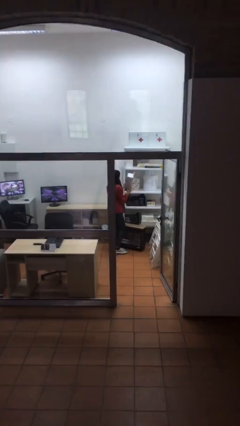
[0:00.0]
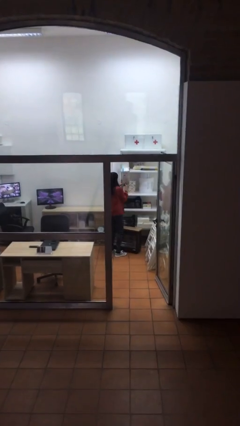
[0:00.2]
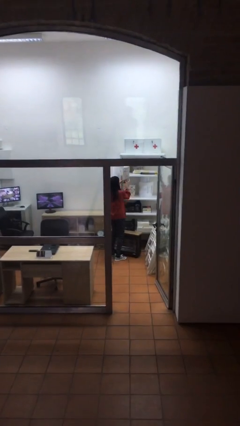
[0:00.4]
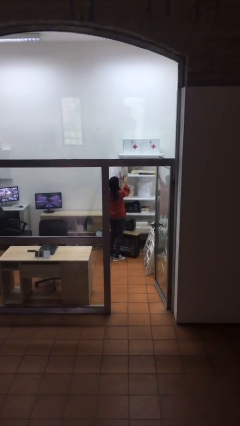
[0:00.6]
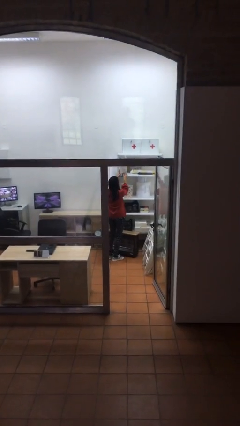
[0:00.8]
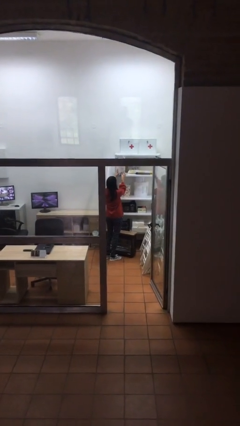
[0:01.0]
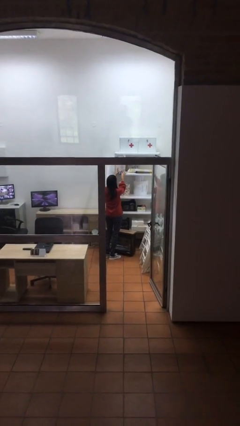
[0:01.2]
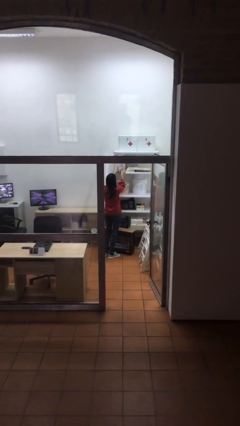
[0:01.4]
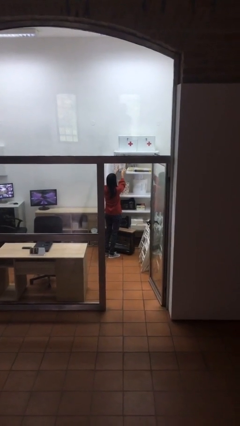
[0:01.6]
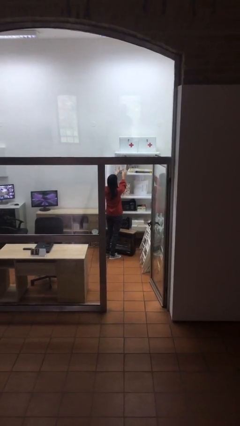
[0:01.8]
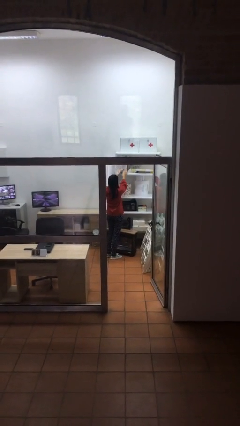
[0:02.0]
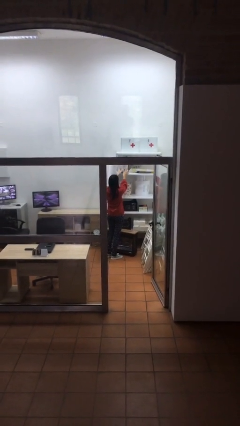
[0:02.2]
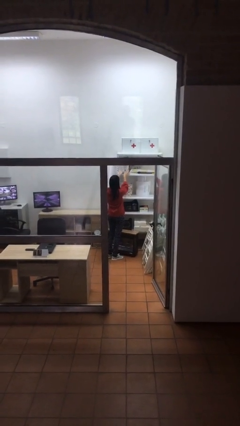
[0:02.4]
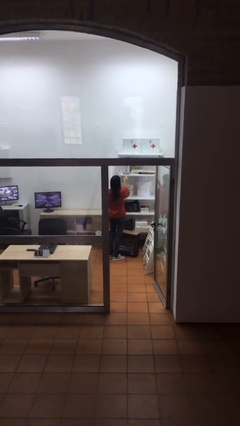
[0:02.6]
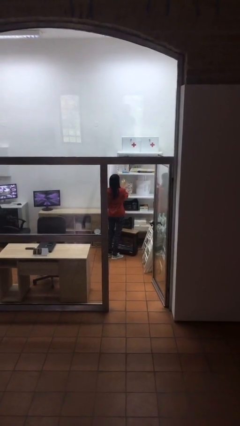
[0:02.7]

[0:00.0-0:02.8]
person puts down object on shelf

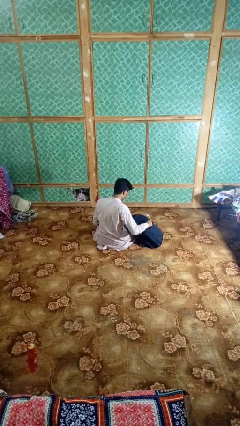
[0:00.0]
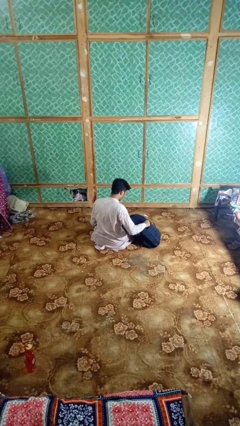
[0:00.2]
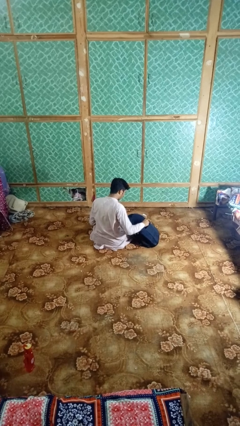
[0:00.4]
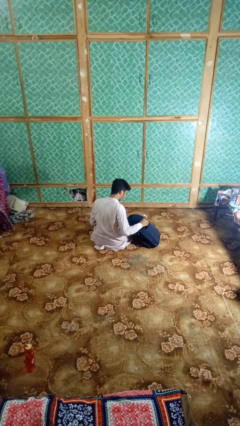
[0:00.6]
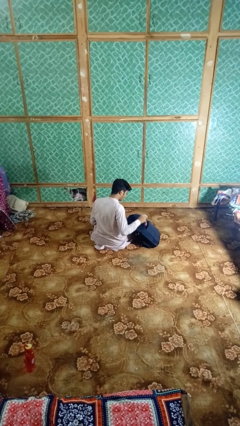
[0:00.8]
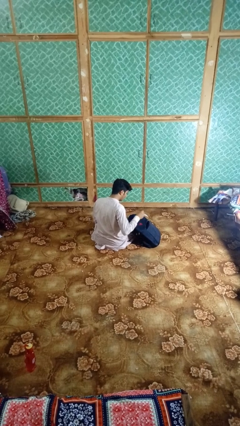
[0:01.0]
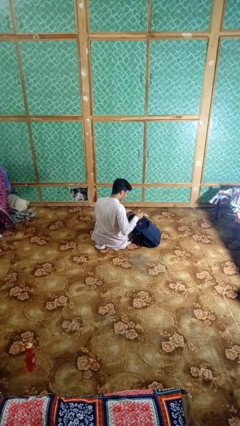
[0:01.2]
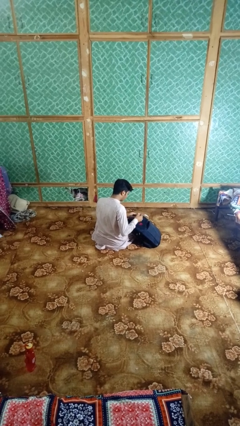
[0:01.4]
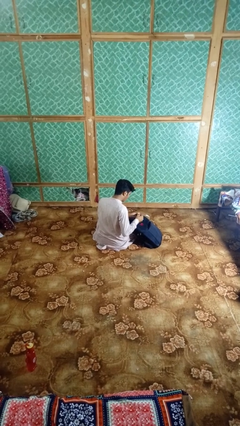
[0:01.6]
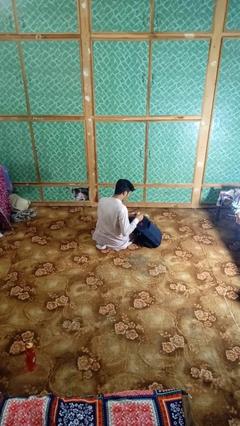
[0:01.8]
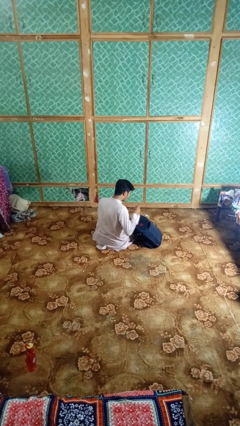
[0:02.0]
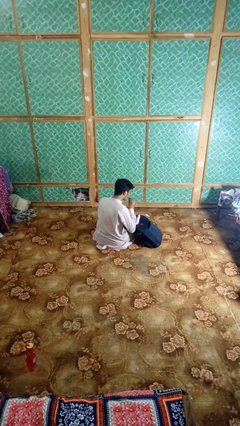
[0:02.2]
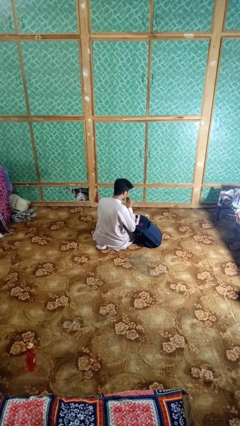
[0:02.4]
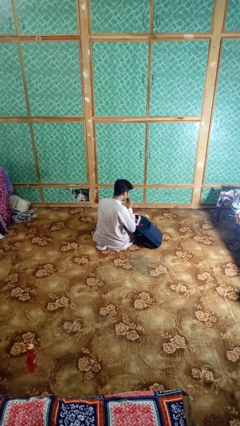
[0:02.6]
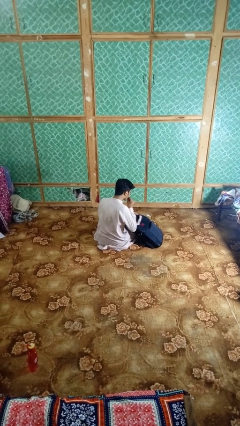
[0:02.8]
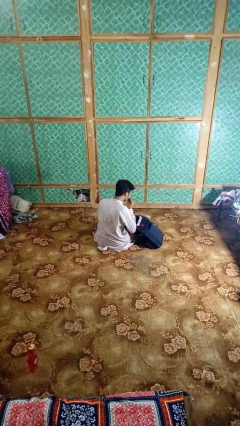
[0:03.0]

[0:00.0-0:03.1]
person eats snack from bag

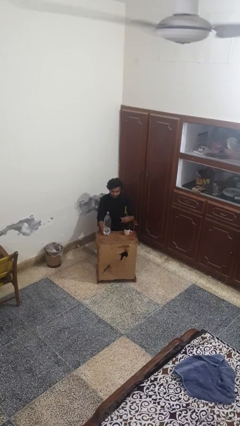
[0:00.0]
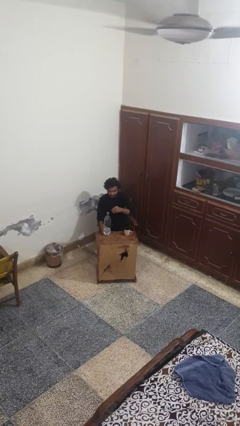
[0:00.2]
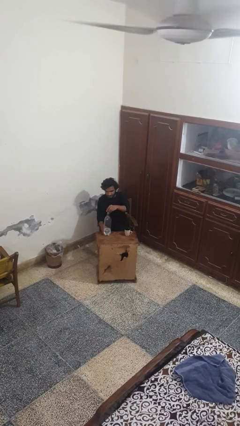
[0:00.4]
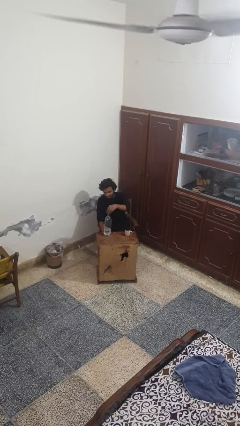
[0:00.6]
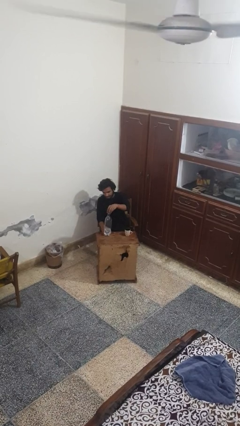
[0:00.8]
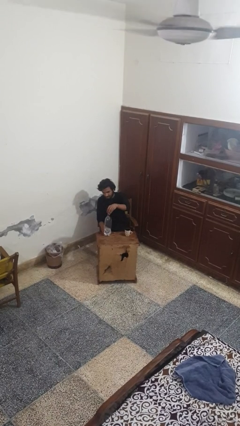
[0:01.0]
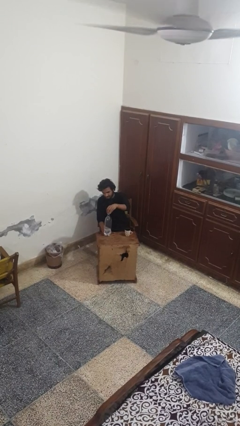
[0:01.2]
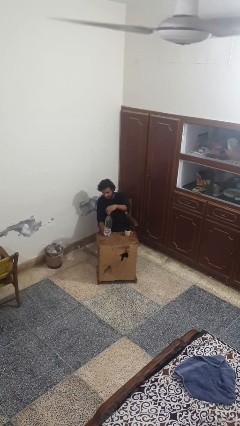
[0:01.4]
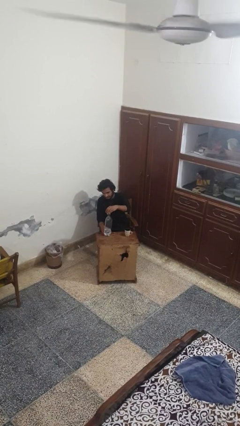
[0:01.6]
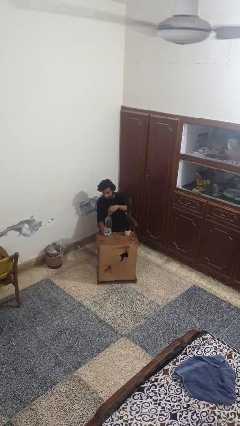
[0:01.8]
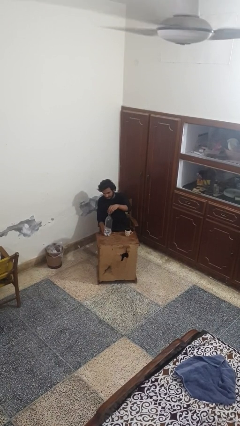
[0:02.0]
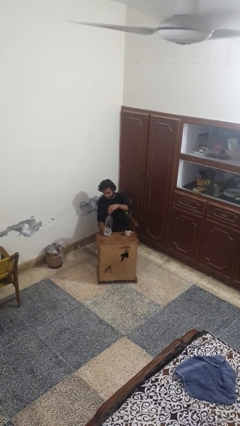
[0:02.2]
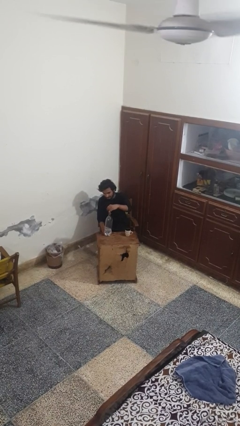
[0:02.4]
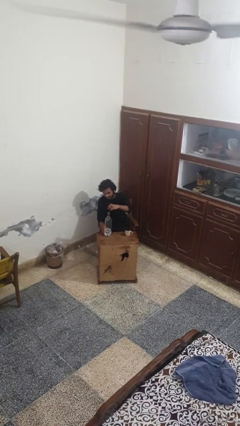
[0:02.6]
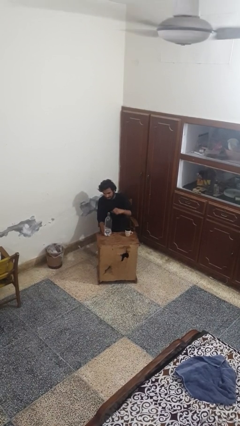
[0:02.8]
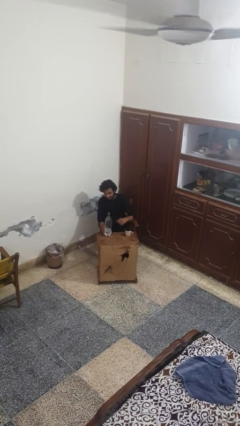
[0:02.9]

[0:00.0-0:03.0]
person screws lid to bottle

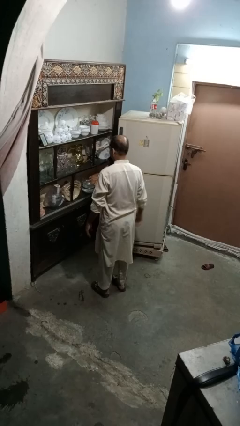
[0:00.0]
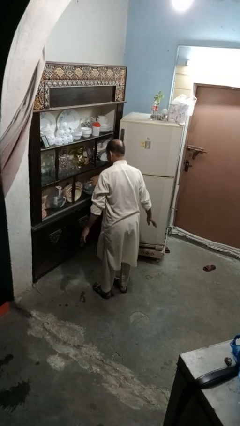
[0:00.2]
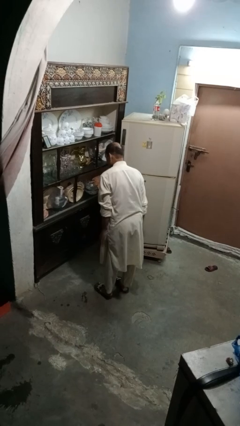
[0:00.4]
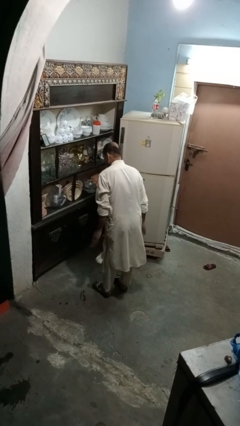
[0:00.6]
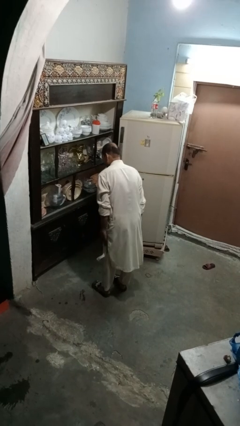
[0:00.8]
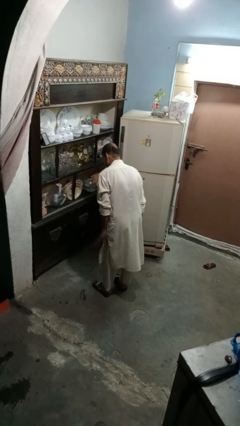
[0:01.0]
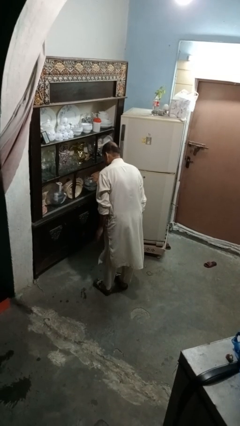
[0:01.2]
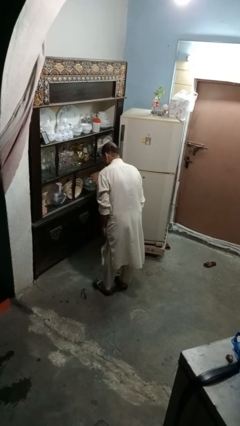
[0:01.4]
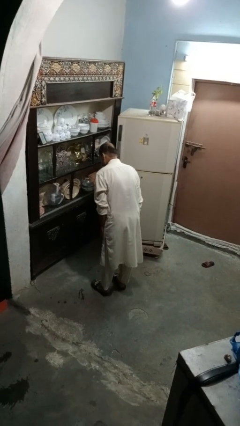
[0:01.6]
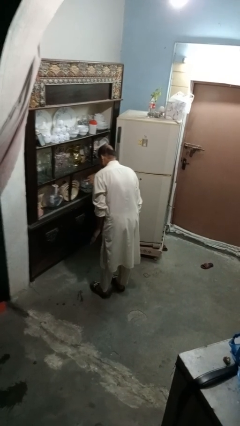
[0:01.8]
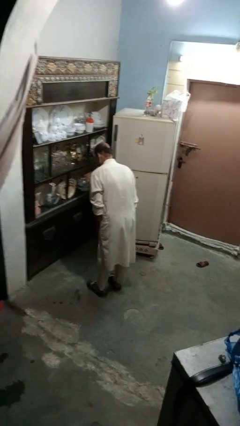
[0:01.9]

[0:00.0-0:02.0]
person slaps hands on thighs

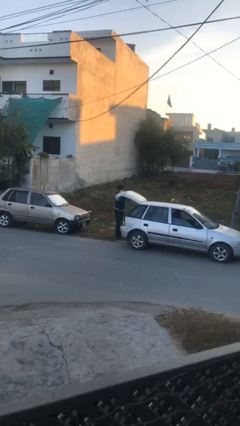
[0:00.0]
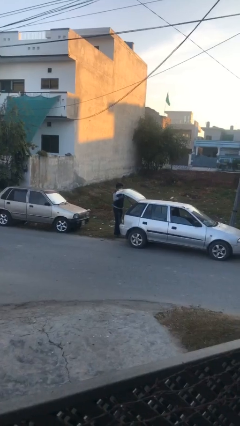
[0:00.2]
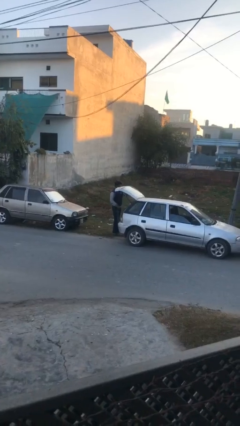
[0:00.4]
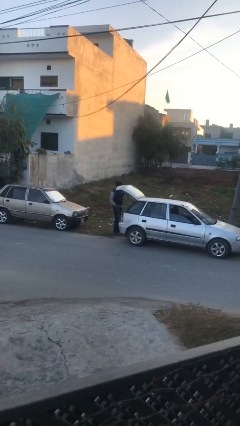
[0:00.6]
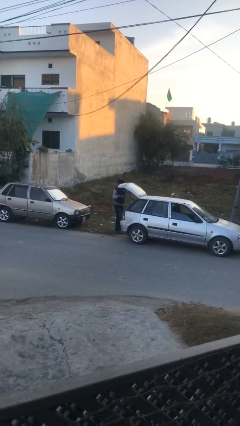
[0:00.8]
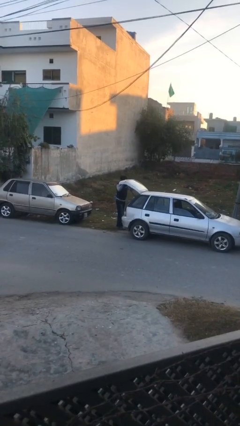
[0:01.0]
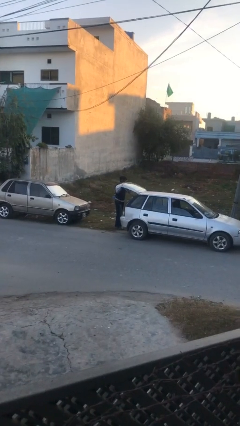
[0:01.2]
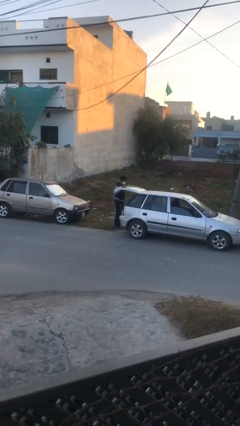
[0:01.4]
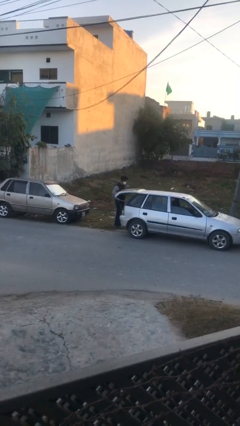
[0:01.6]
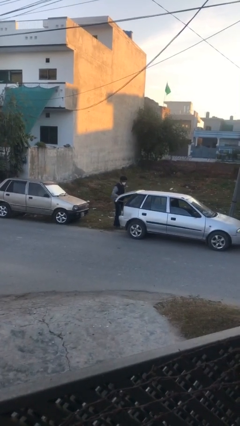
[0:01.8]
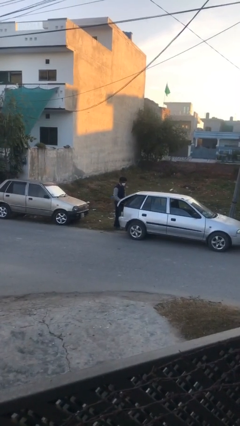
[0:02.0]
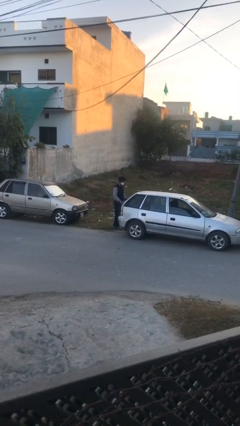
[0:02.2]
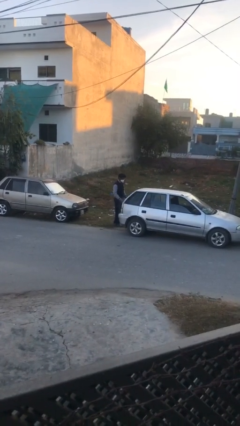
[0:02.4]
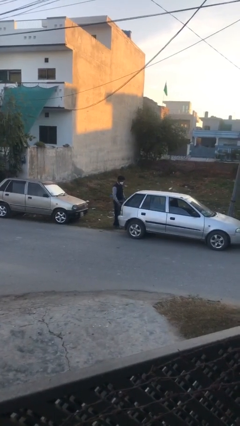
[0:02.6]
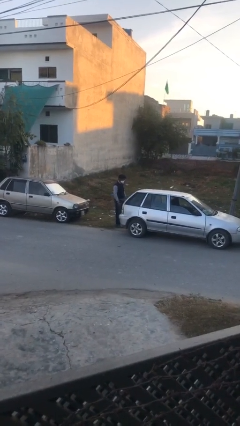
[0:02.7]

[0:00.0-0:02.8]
person closes car trunk

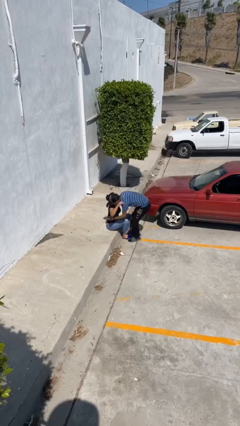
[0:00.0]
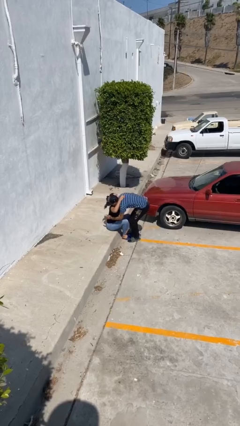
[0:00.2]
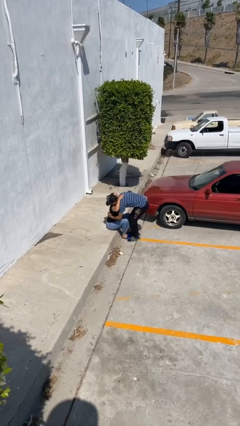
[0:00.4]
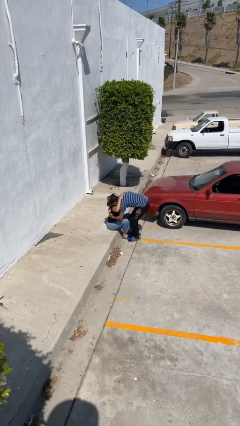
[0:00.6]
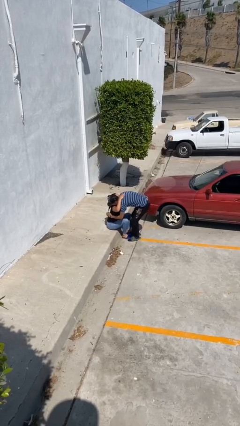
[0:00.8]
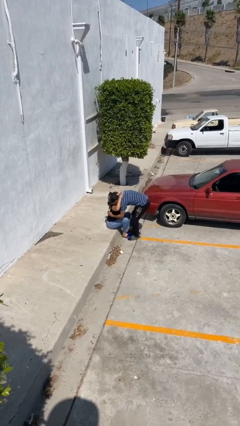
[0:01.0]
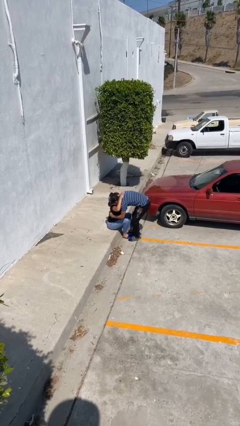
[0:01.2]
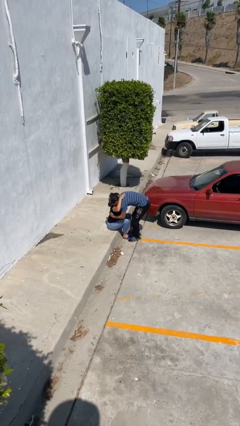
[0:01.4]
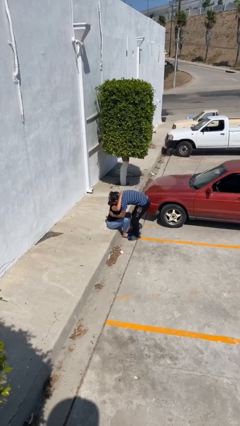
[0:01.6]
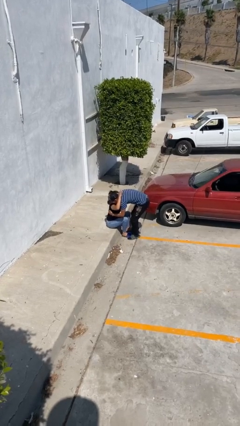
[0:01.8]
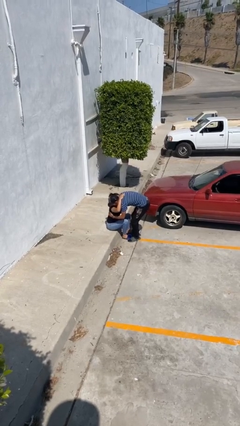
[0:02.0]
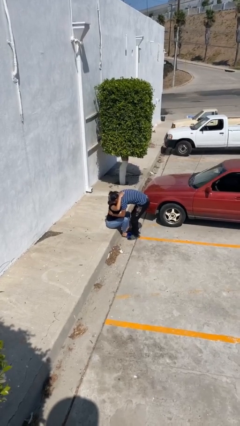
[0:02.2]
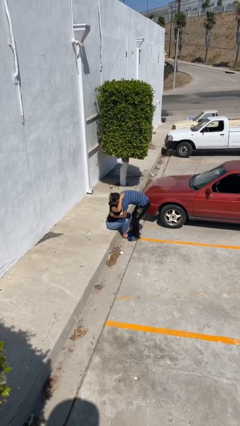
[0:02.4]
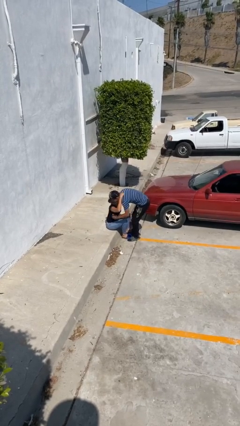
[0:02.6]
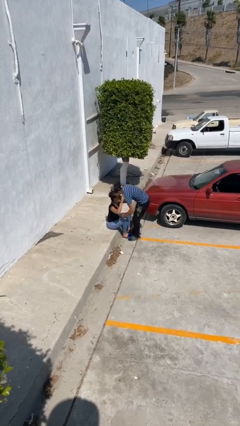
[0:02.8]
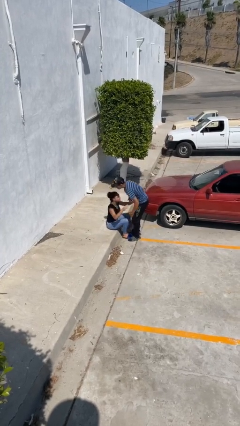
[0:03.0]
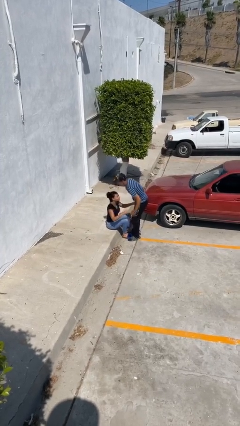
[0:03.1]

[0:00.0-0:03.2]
person embraces person
